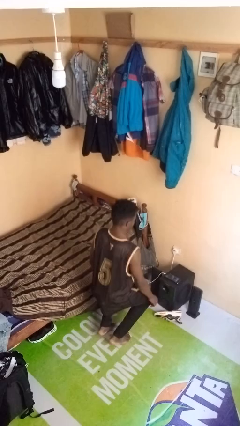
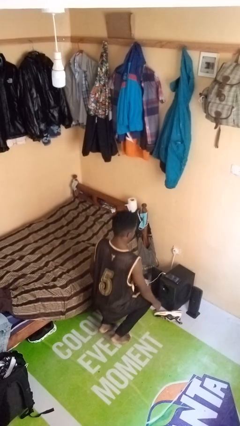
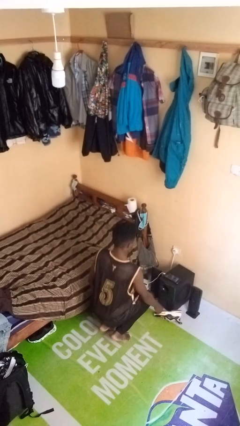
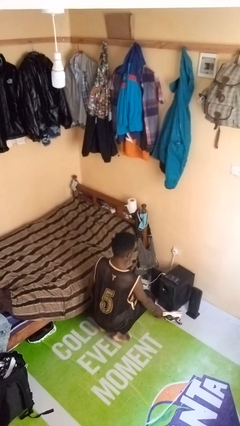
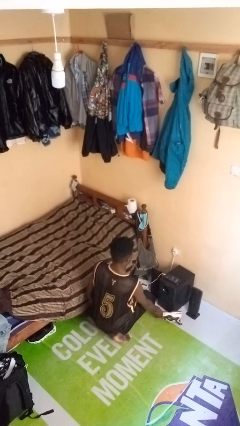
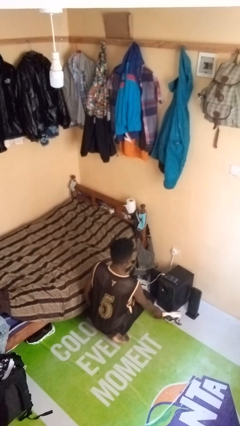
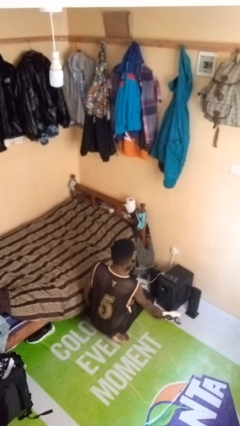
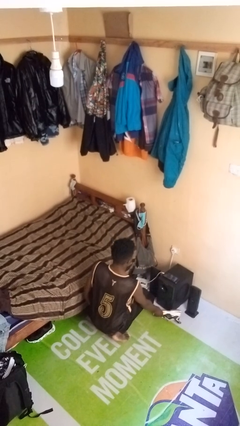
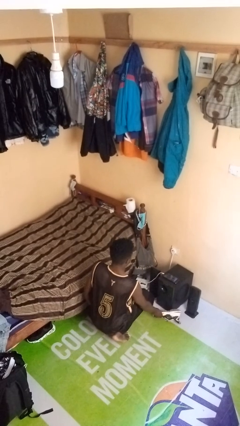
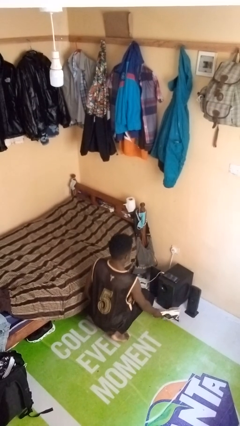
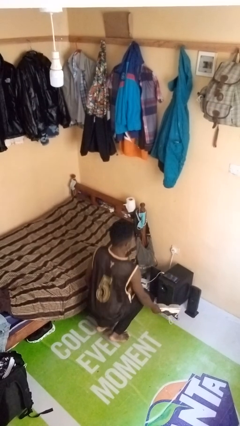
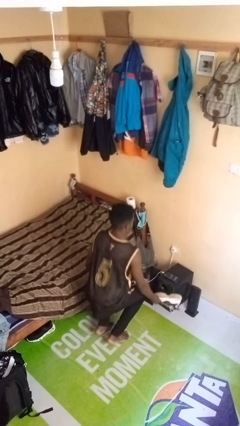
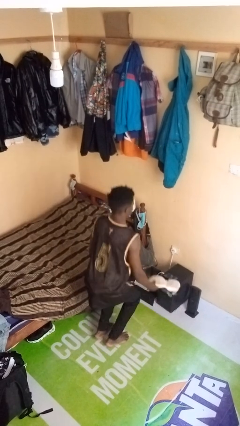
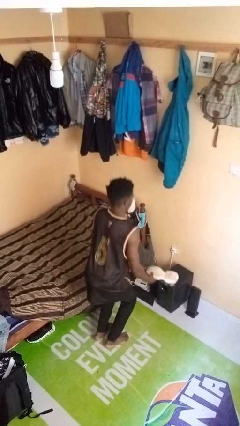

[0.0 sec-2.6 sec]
person picks up object from floor

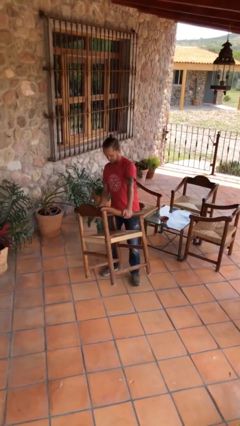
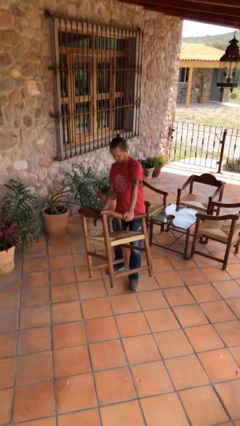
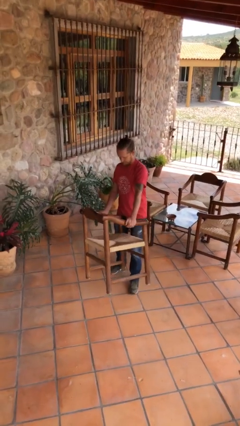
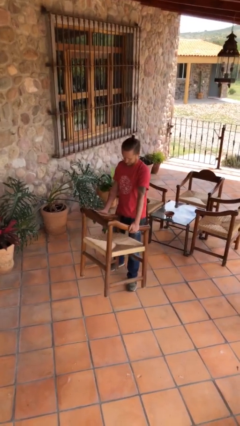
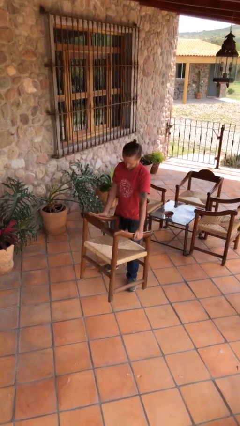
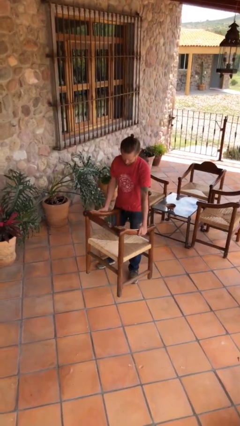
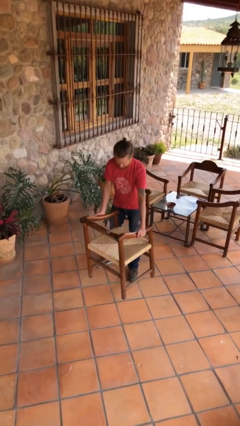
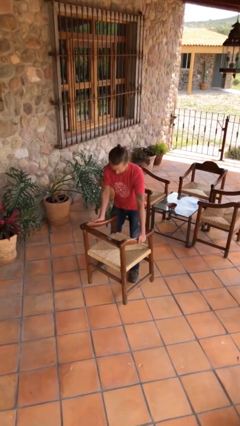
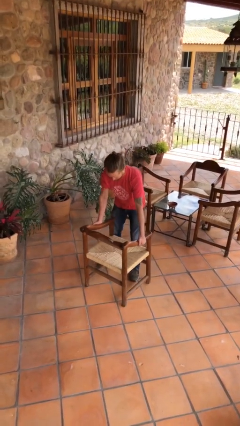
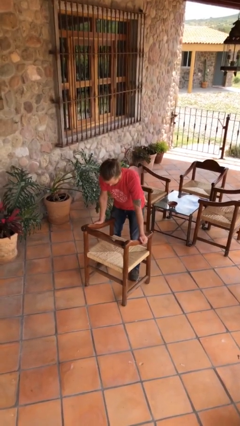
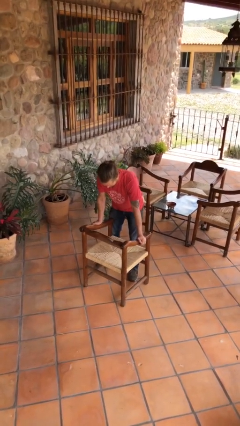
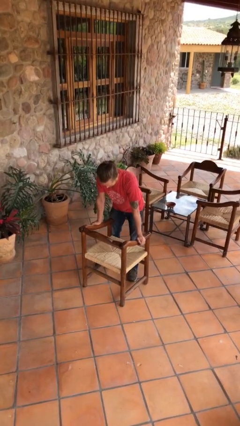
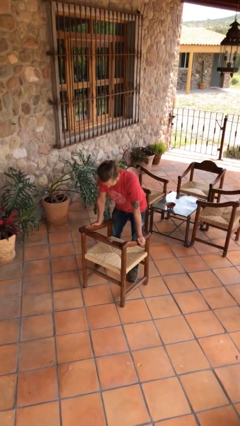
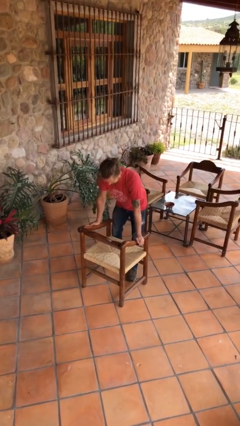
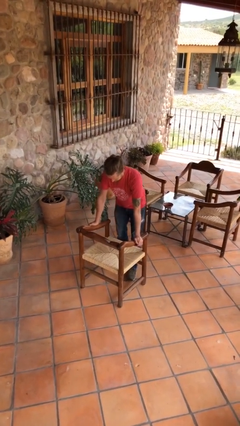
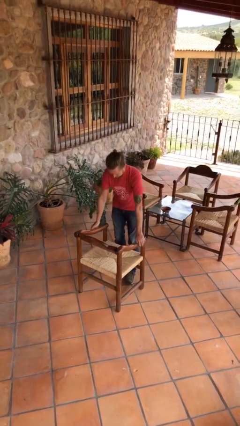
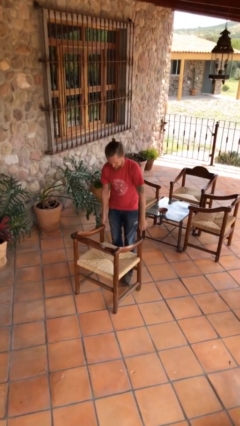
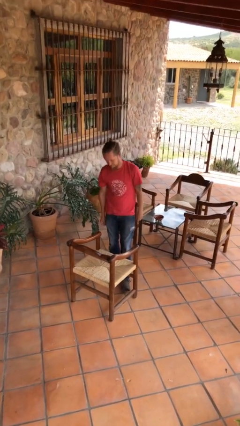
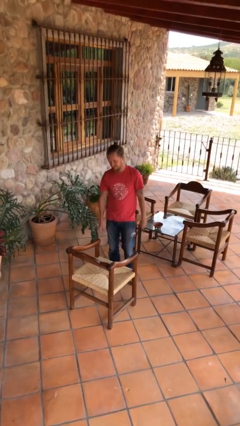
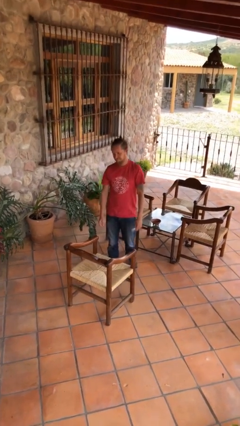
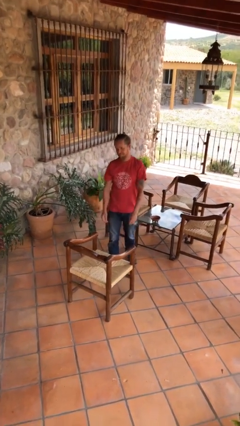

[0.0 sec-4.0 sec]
person puts down object on floor

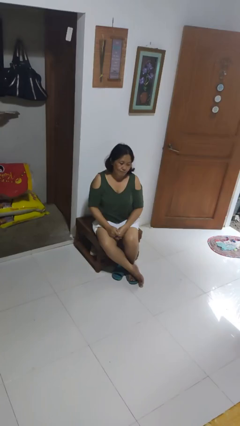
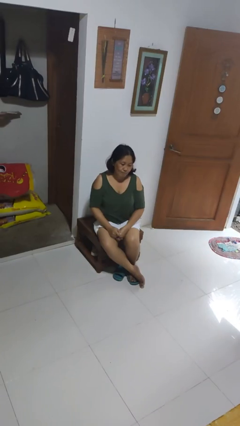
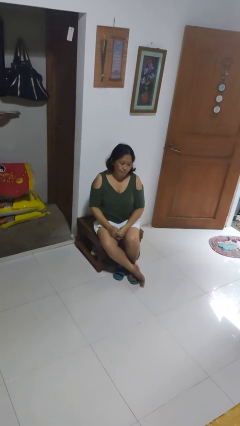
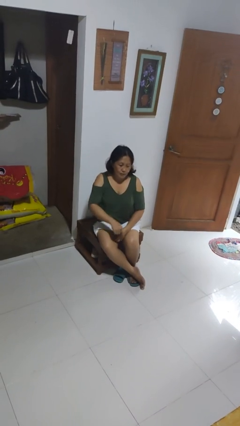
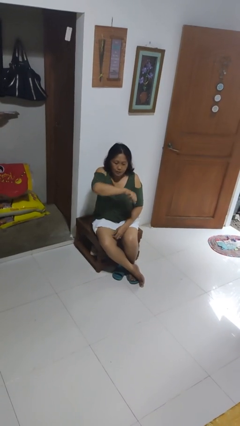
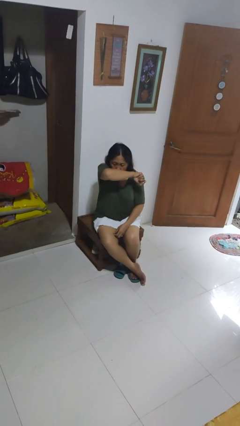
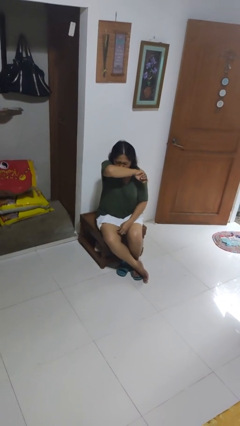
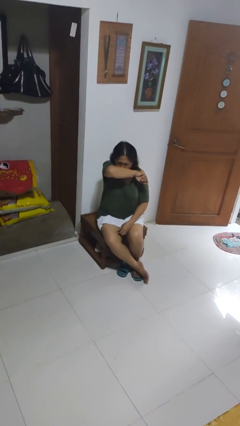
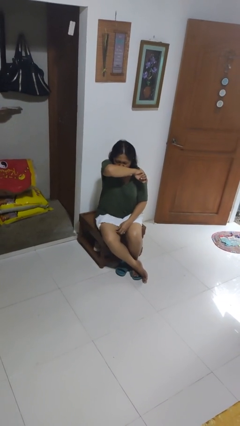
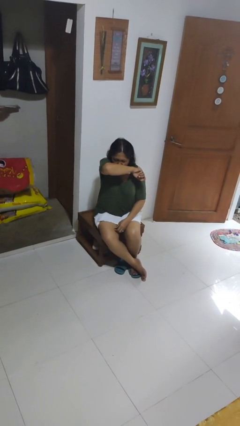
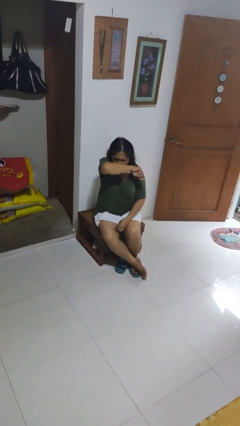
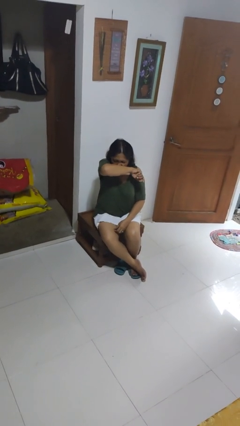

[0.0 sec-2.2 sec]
person sneezes into arm

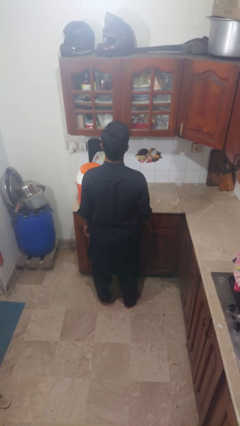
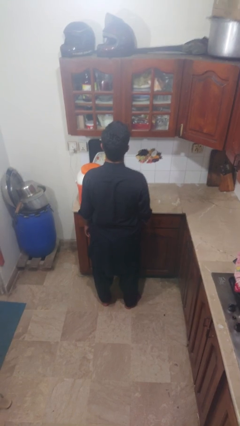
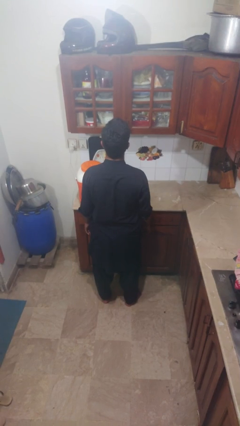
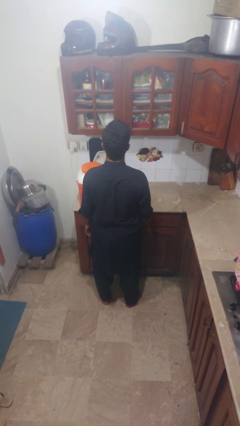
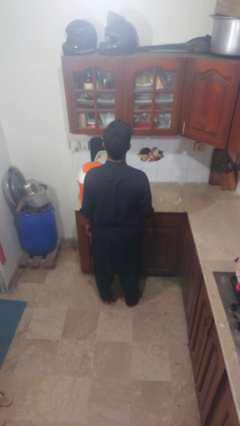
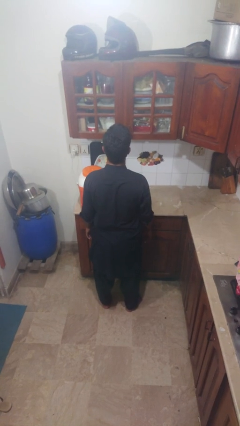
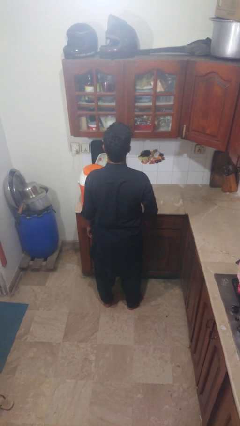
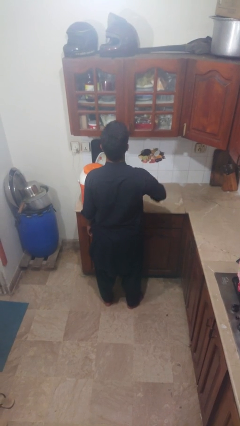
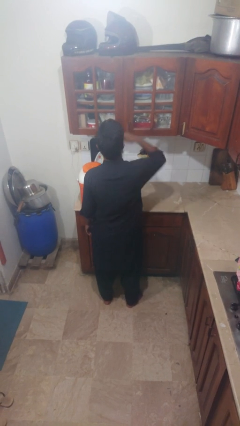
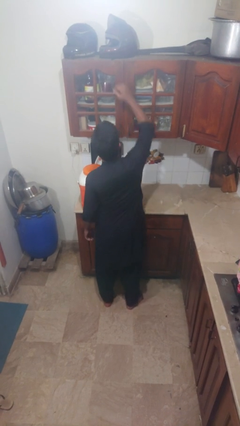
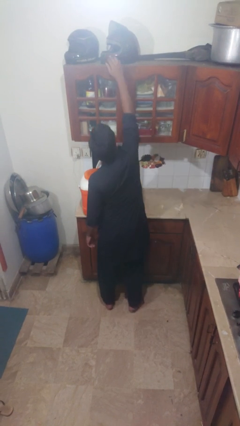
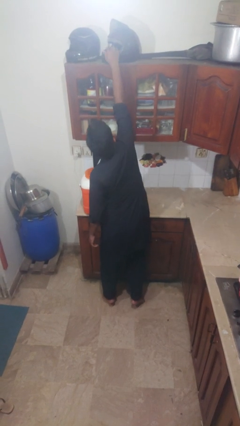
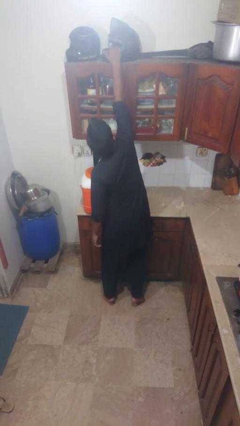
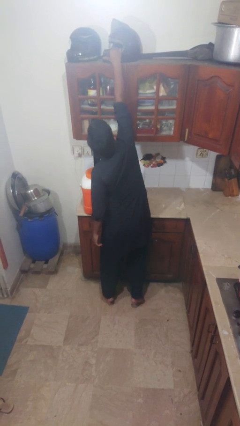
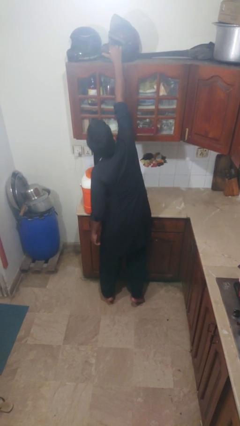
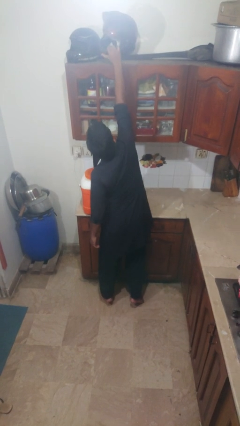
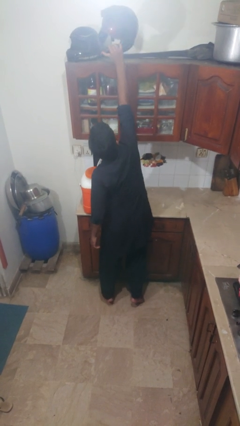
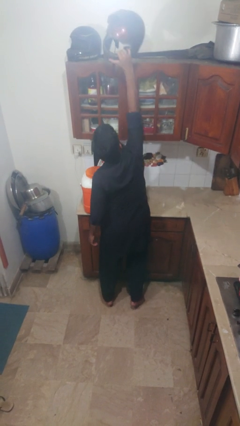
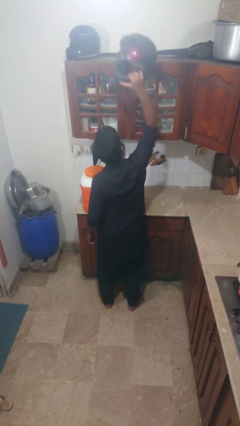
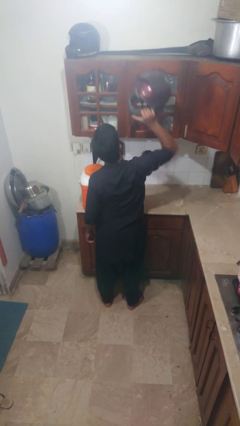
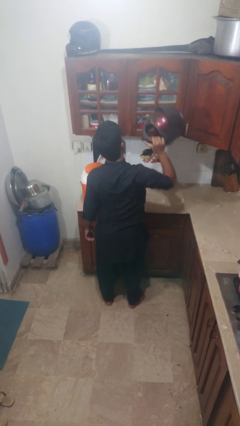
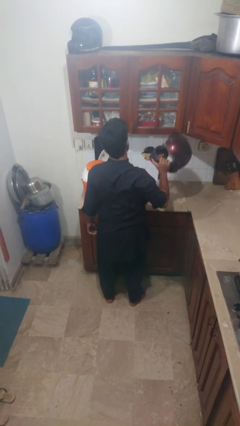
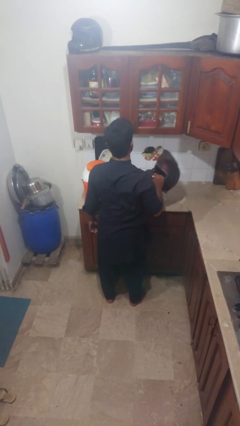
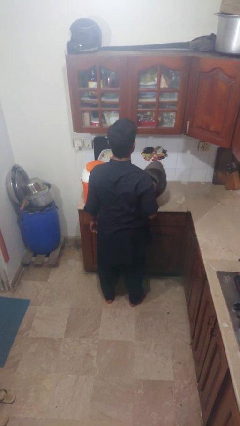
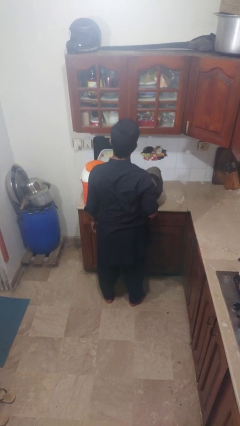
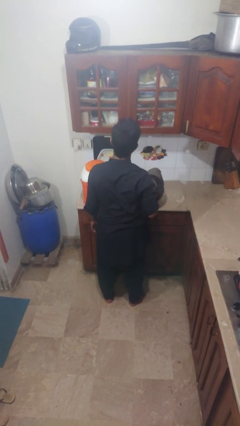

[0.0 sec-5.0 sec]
person picks up object from shelf

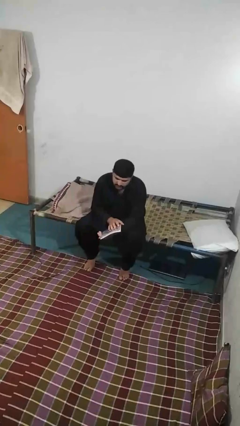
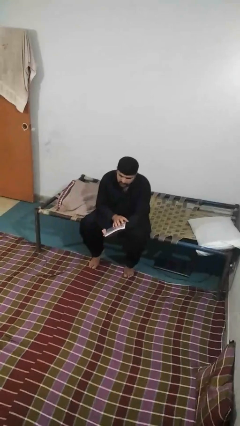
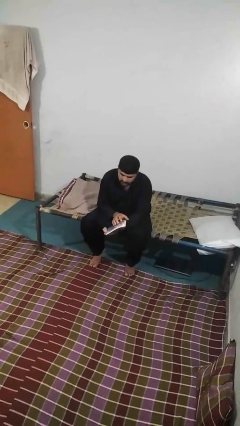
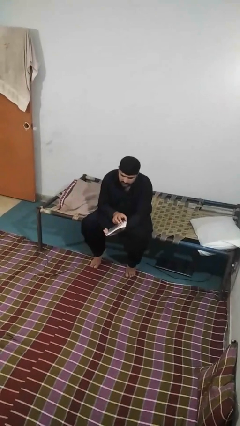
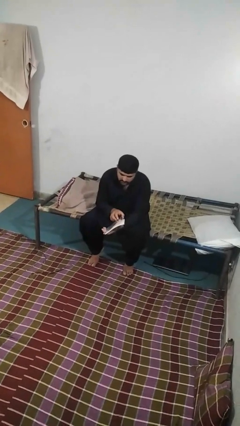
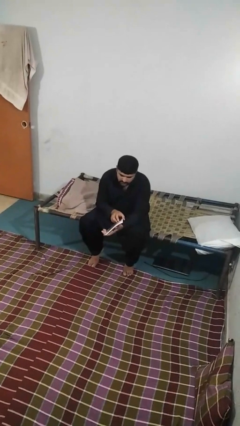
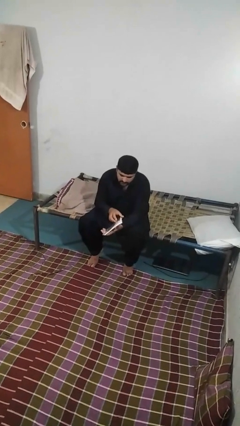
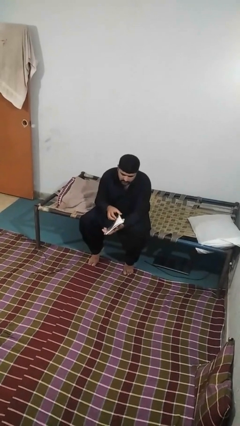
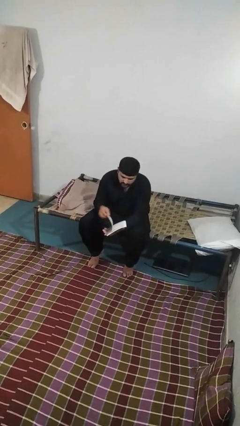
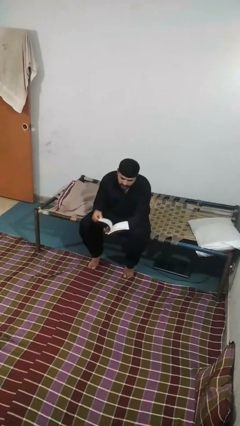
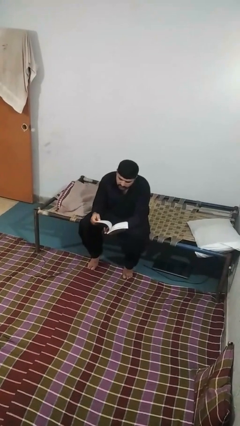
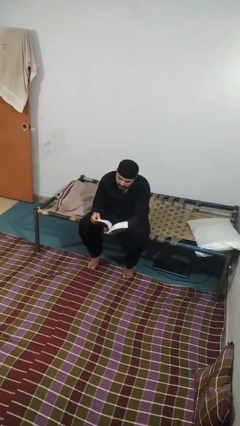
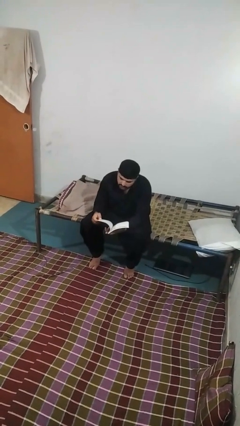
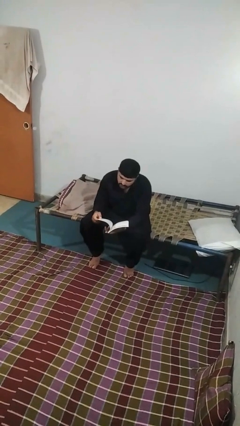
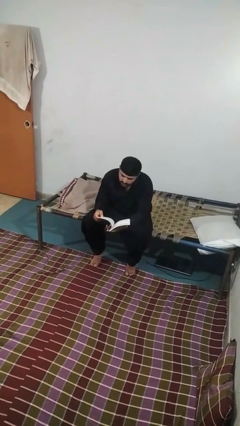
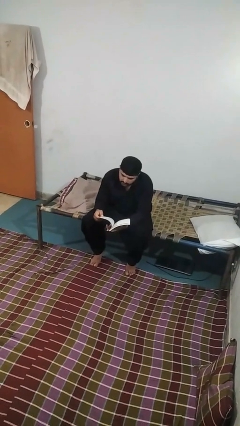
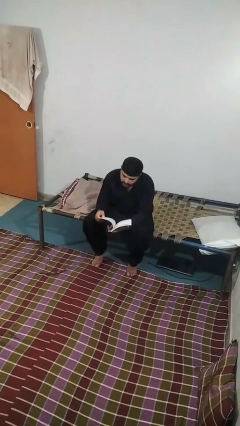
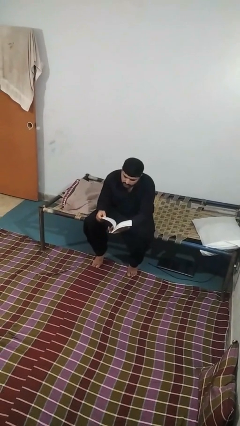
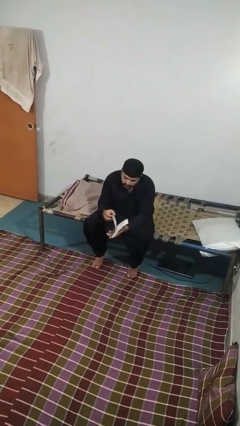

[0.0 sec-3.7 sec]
person reads book
